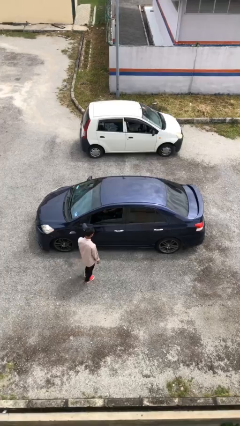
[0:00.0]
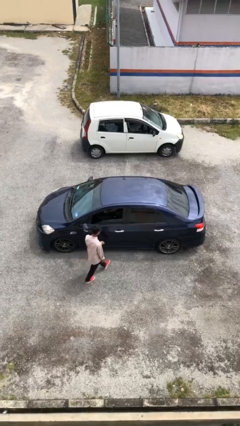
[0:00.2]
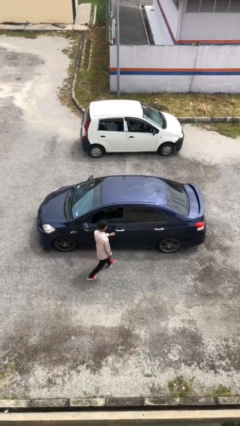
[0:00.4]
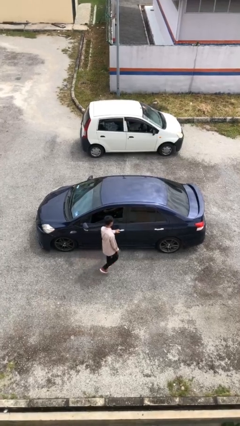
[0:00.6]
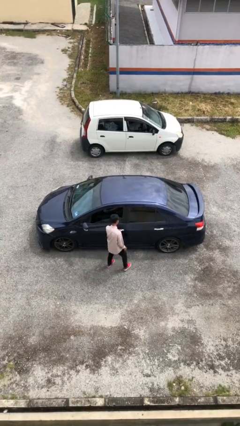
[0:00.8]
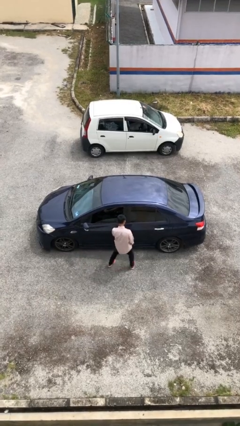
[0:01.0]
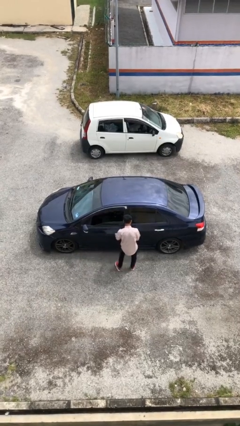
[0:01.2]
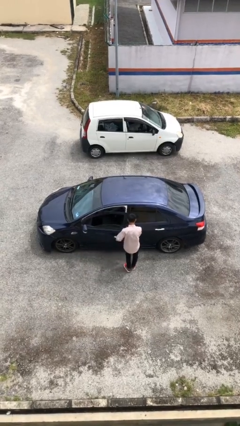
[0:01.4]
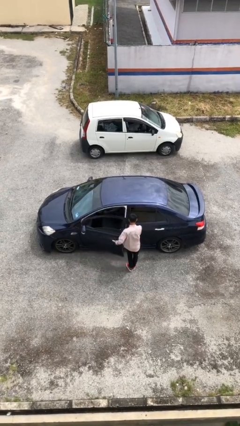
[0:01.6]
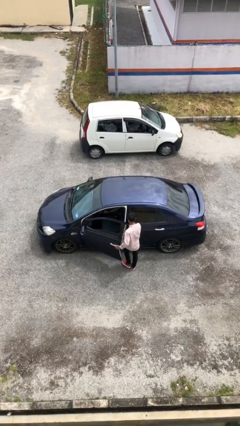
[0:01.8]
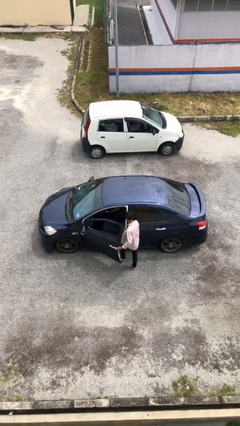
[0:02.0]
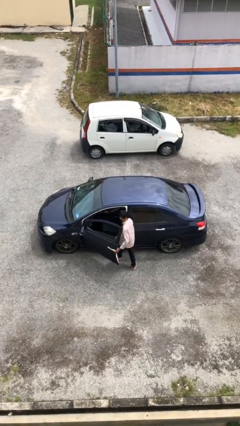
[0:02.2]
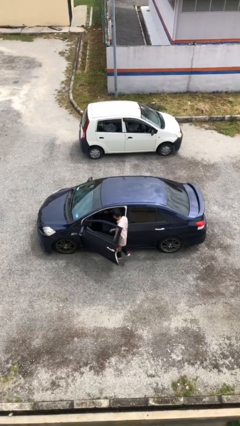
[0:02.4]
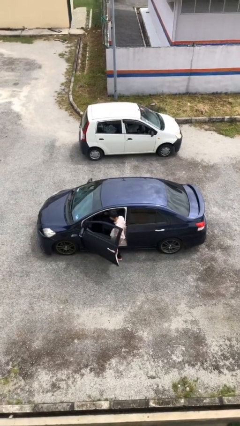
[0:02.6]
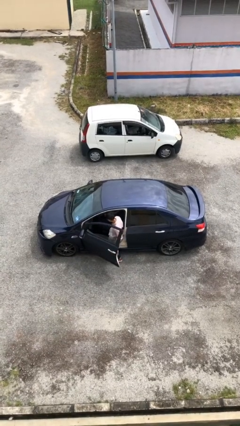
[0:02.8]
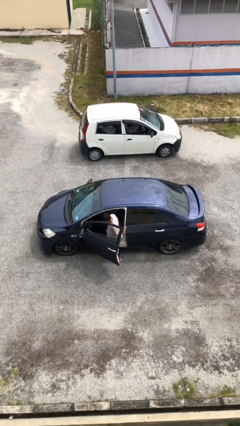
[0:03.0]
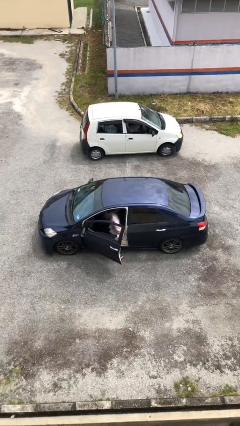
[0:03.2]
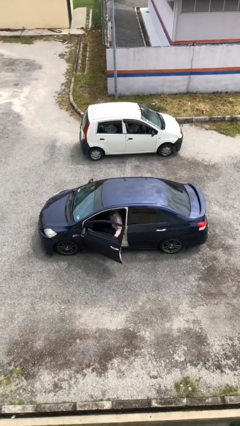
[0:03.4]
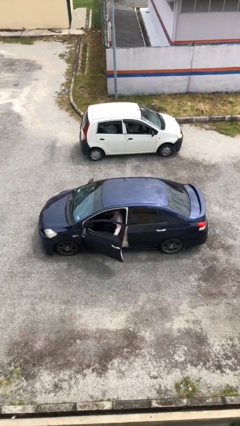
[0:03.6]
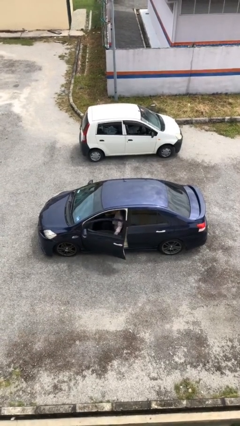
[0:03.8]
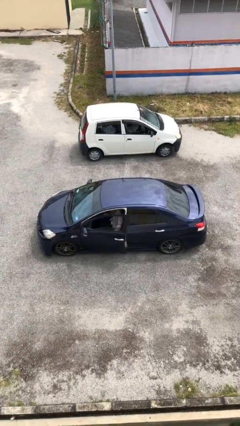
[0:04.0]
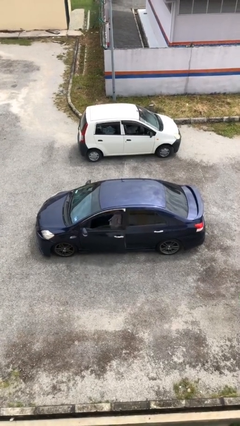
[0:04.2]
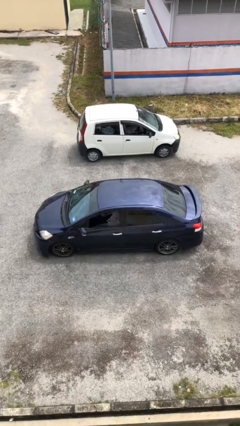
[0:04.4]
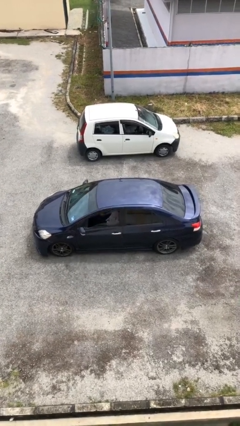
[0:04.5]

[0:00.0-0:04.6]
car picks up person

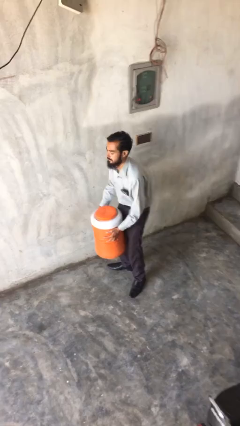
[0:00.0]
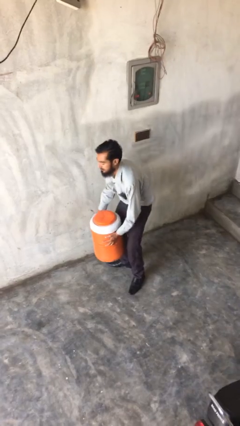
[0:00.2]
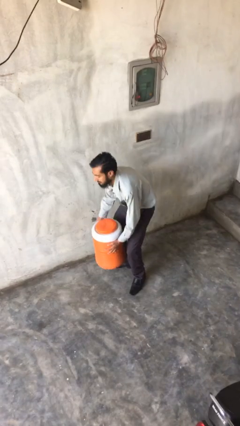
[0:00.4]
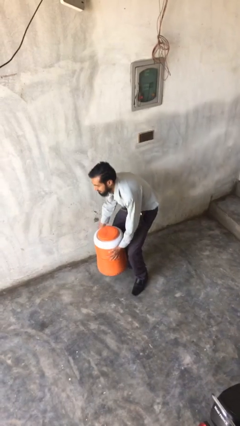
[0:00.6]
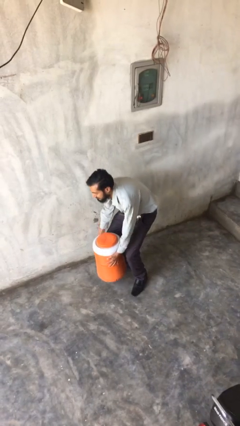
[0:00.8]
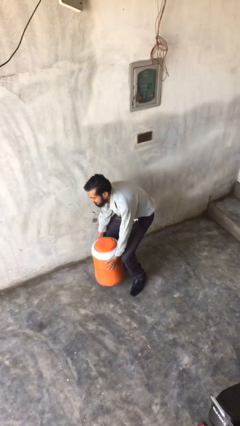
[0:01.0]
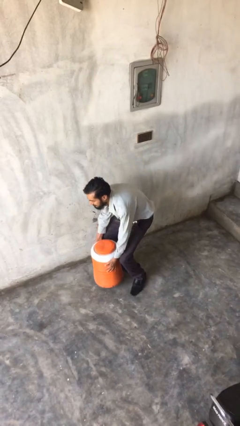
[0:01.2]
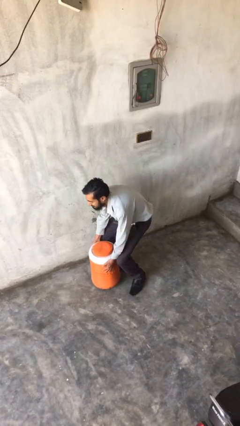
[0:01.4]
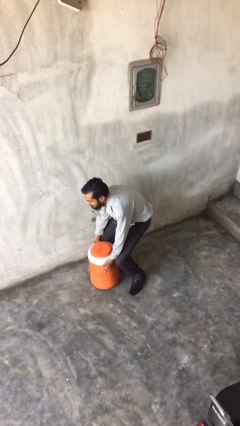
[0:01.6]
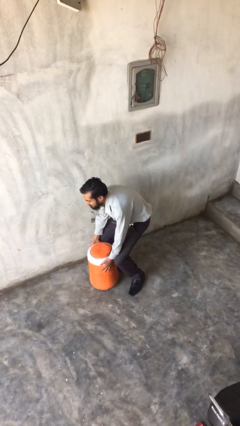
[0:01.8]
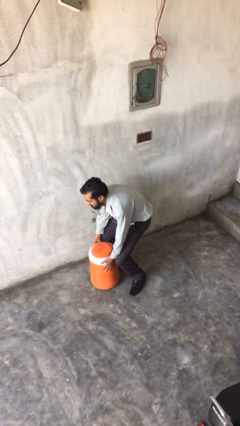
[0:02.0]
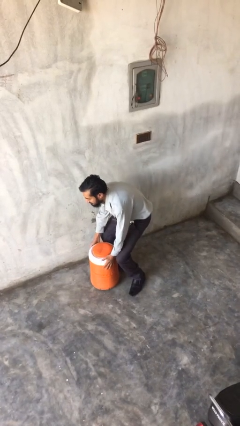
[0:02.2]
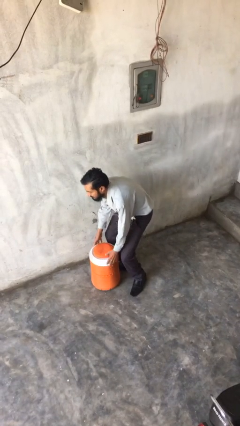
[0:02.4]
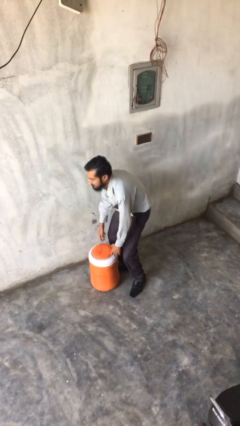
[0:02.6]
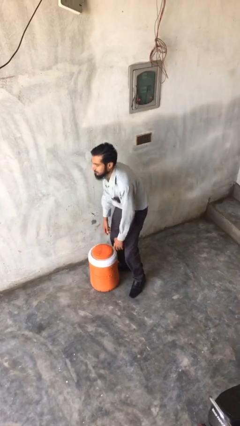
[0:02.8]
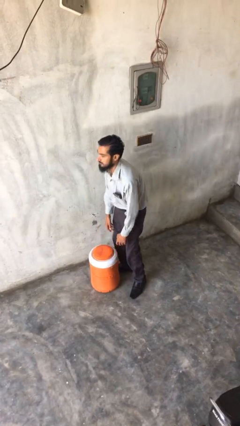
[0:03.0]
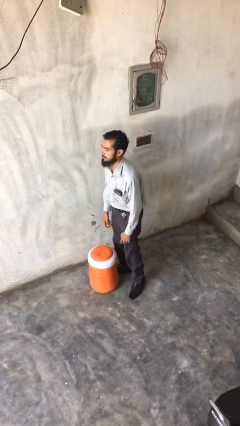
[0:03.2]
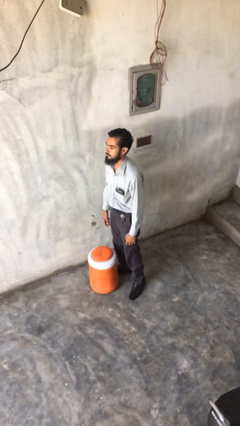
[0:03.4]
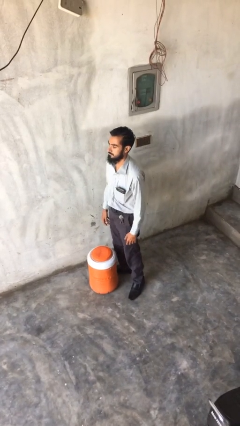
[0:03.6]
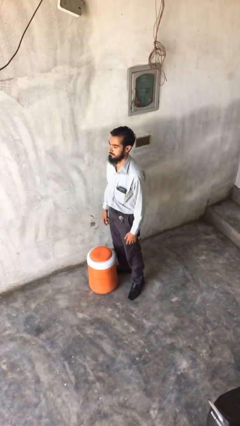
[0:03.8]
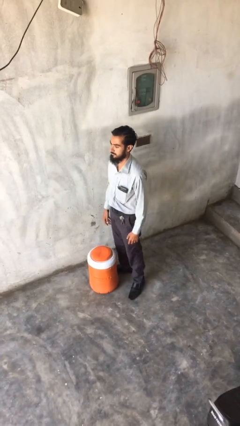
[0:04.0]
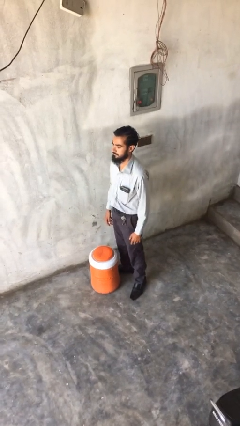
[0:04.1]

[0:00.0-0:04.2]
person puts down object on floor

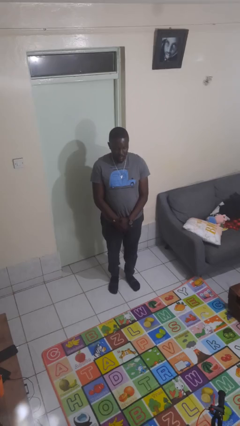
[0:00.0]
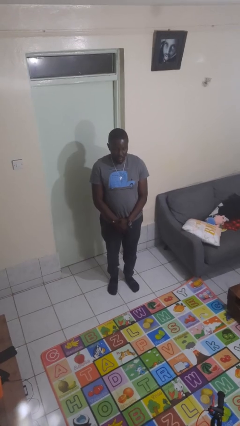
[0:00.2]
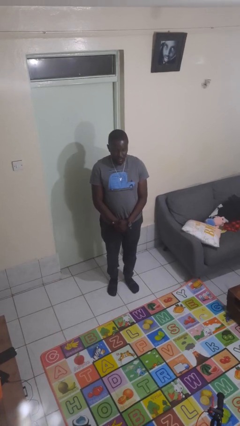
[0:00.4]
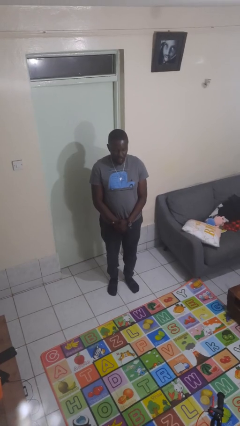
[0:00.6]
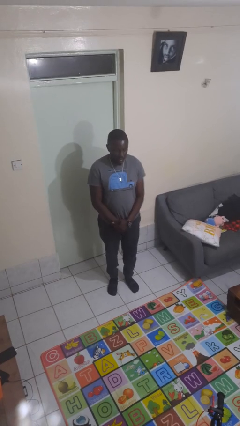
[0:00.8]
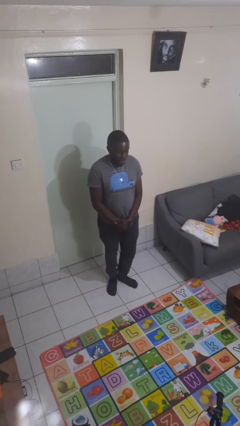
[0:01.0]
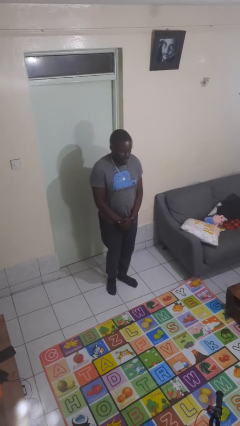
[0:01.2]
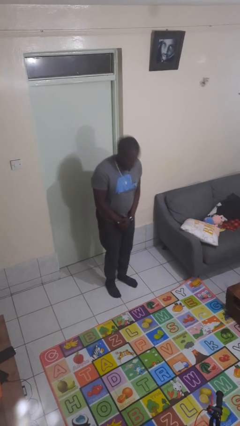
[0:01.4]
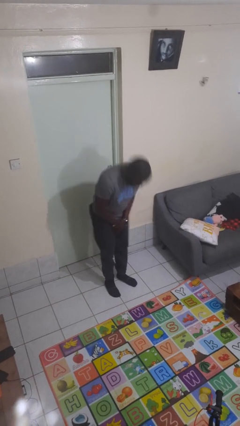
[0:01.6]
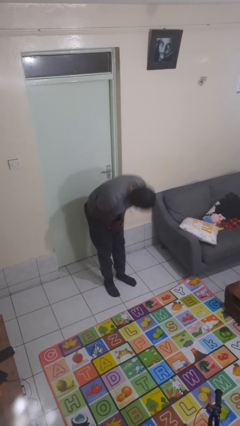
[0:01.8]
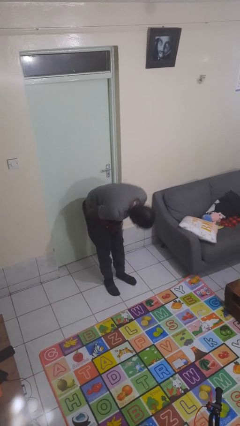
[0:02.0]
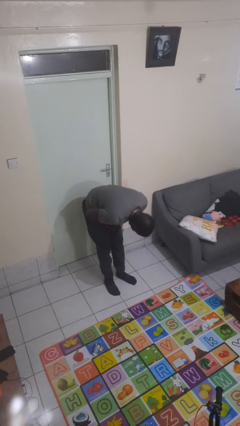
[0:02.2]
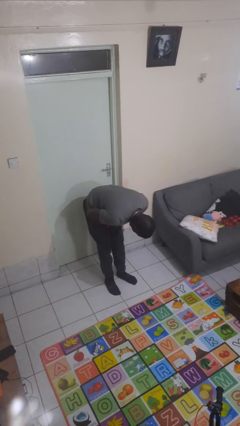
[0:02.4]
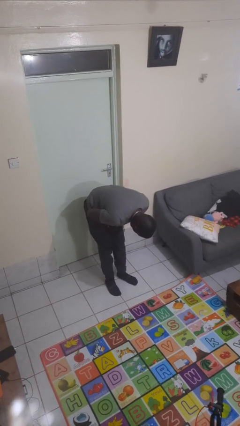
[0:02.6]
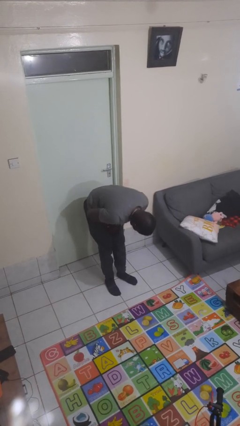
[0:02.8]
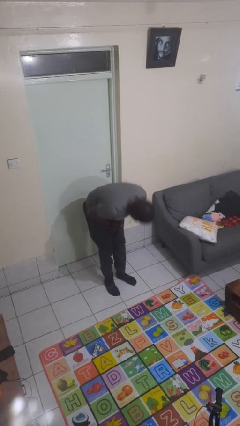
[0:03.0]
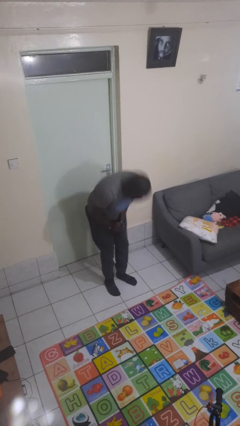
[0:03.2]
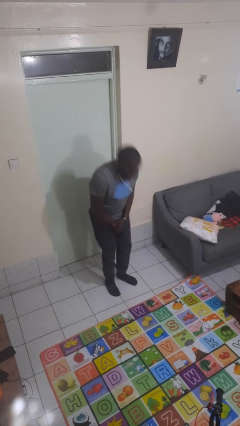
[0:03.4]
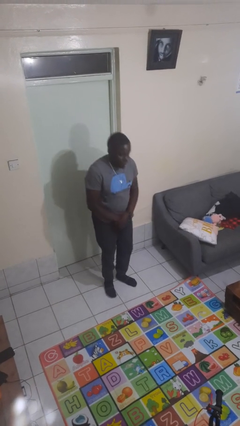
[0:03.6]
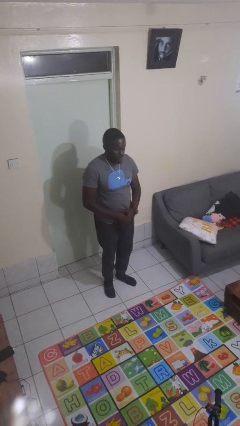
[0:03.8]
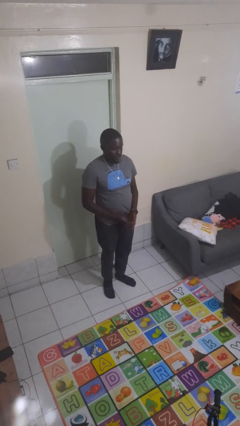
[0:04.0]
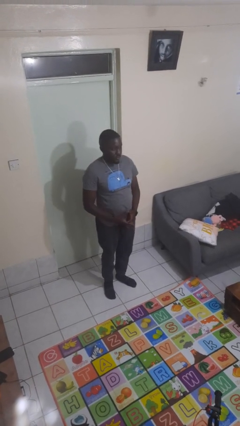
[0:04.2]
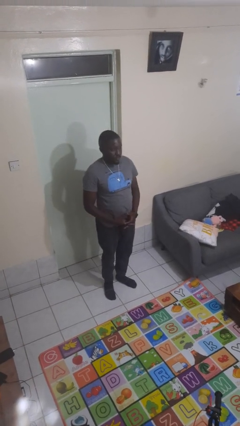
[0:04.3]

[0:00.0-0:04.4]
person bows

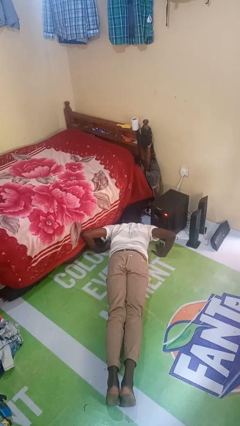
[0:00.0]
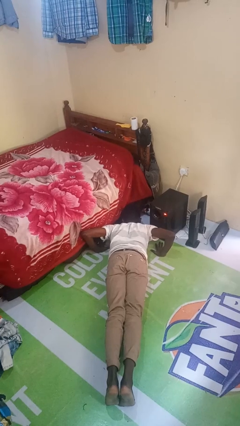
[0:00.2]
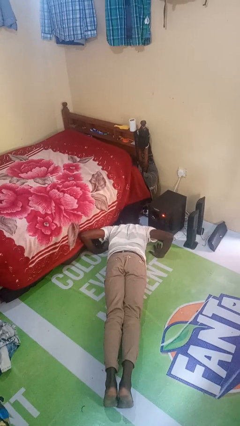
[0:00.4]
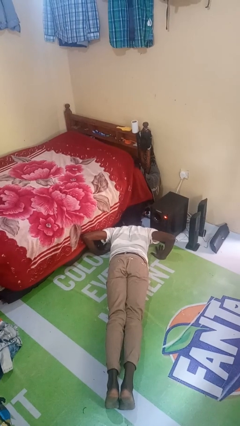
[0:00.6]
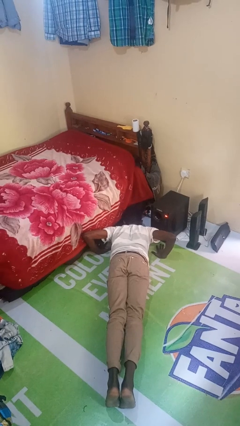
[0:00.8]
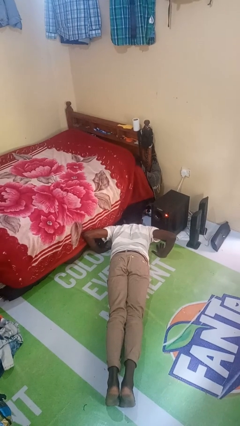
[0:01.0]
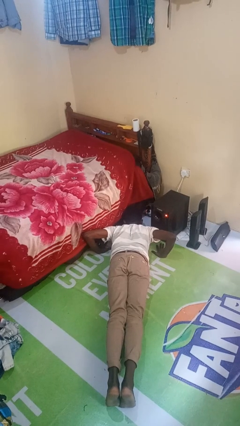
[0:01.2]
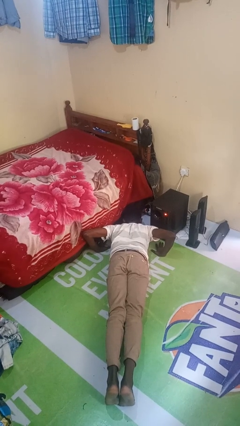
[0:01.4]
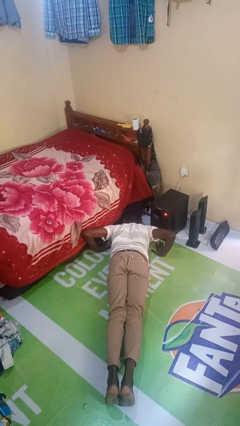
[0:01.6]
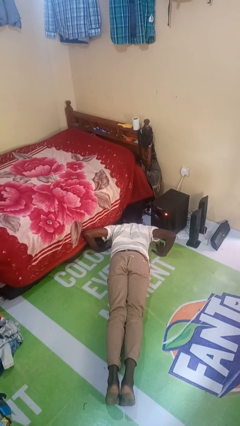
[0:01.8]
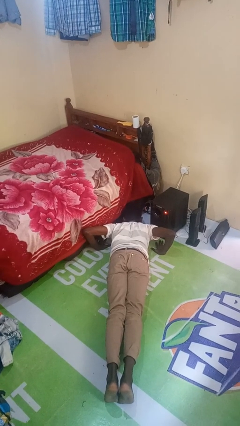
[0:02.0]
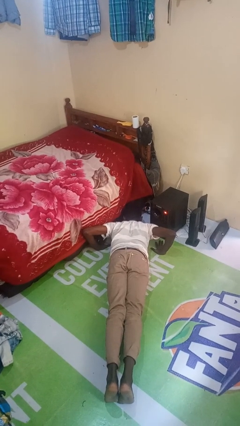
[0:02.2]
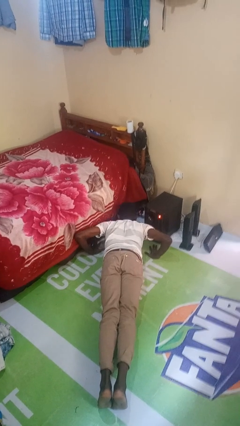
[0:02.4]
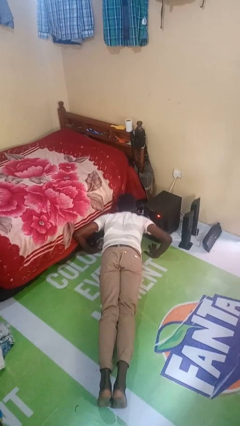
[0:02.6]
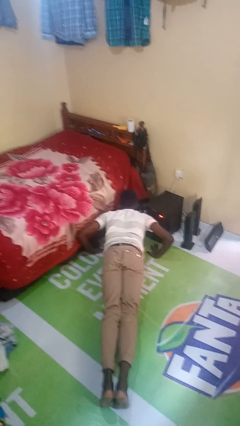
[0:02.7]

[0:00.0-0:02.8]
person exercises with pushup

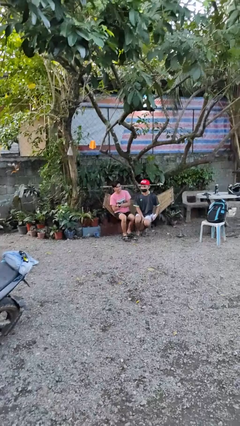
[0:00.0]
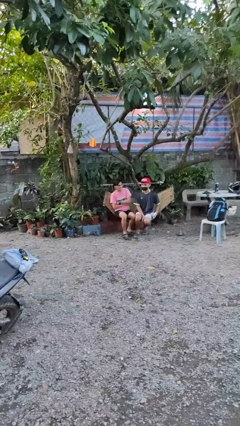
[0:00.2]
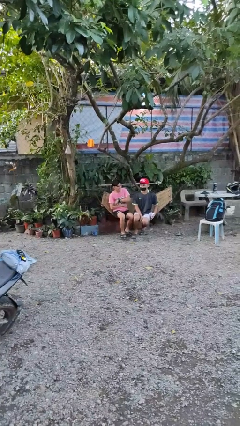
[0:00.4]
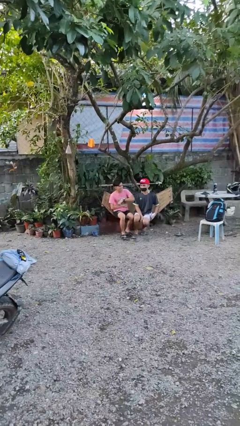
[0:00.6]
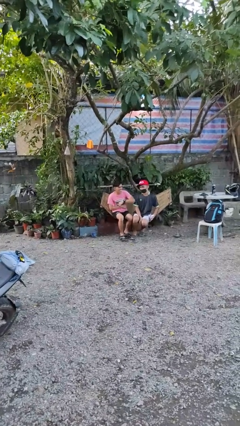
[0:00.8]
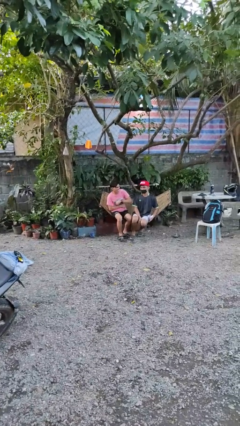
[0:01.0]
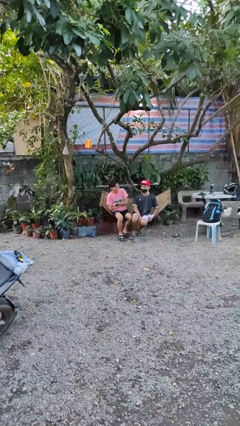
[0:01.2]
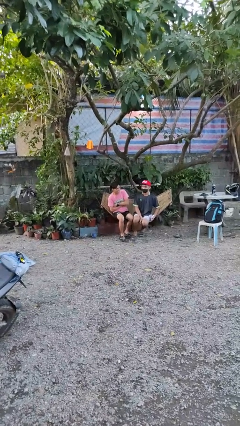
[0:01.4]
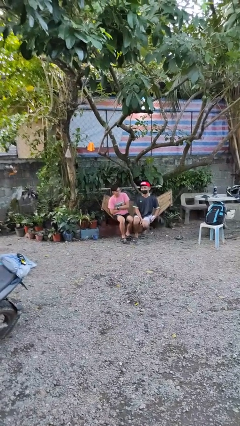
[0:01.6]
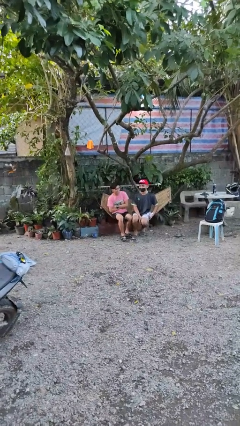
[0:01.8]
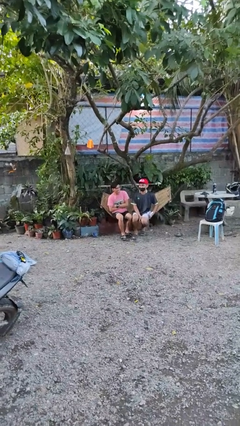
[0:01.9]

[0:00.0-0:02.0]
person nudges person with elbow
